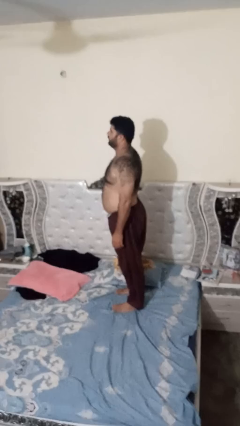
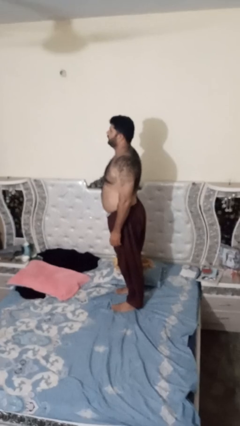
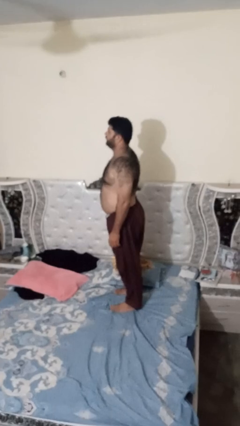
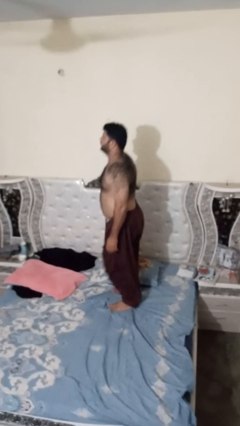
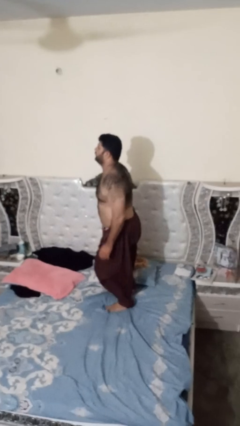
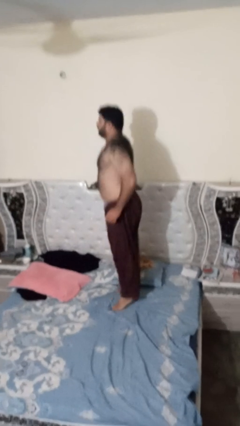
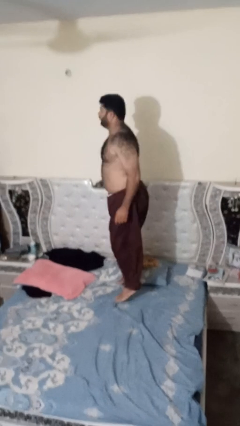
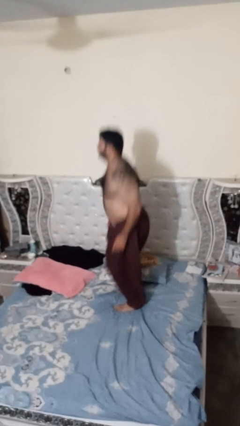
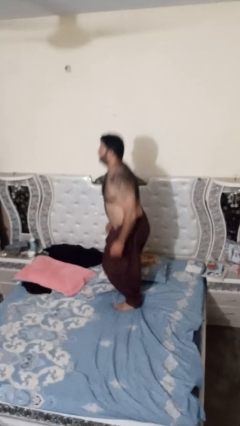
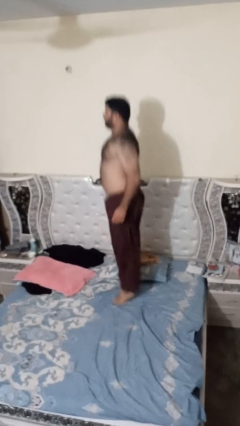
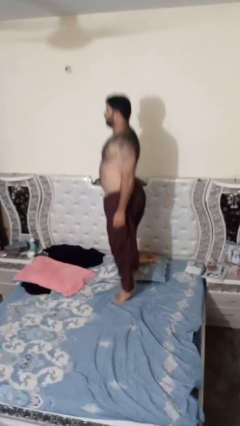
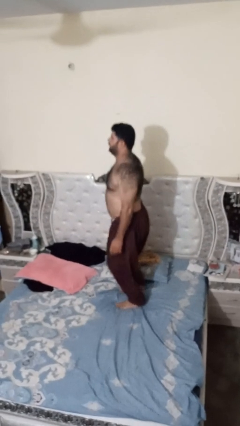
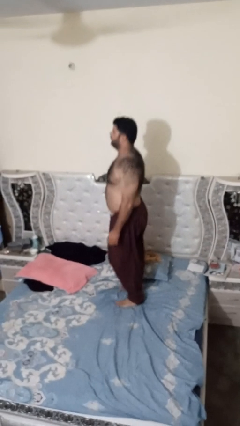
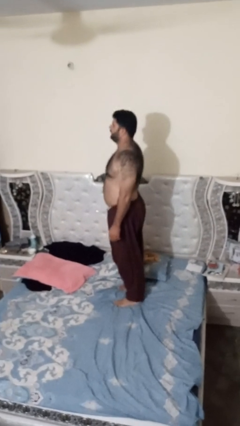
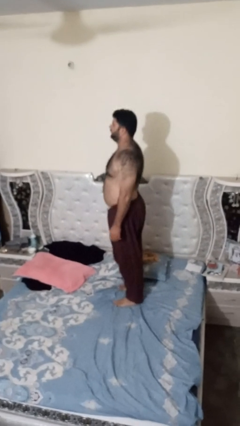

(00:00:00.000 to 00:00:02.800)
person jumps on bed

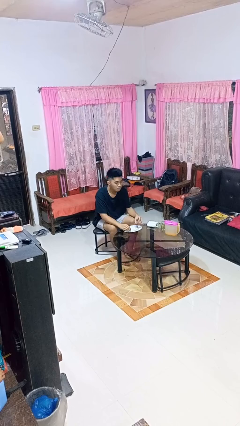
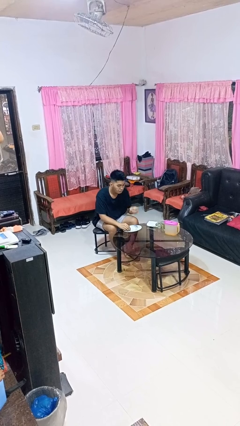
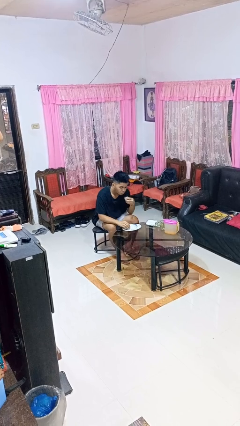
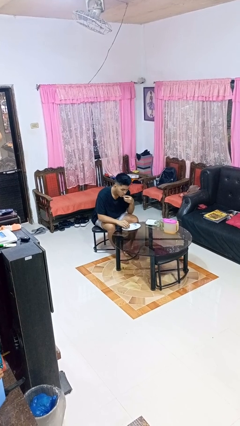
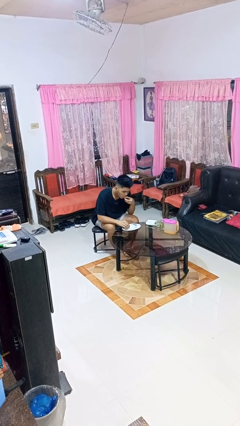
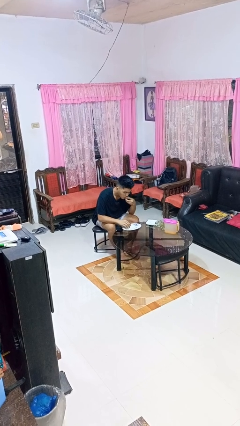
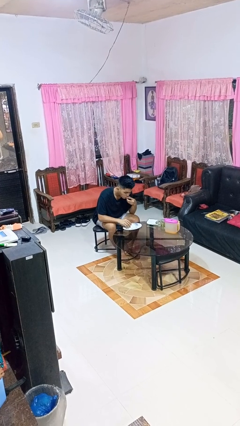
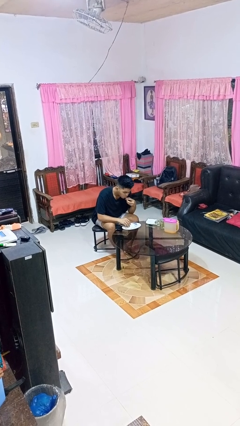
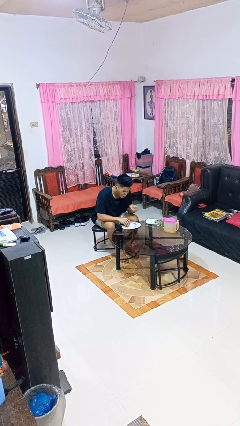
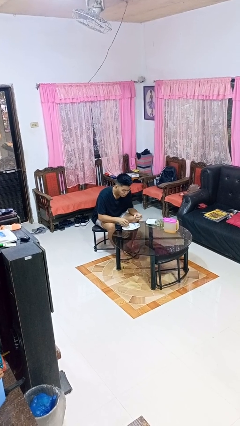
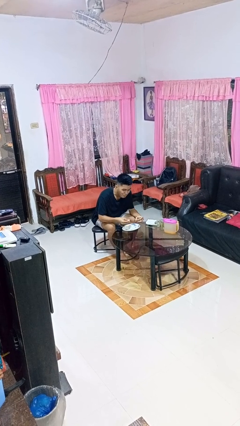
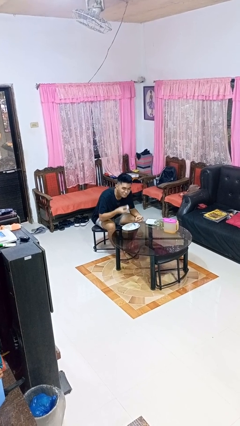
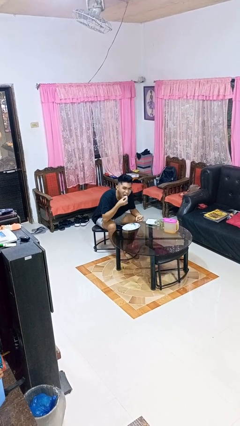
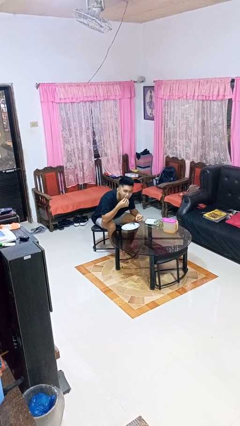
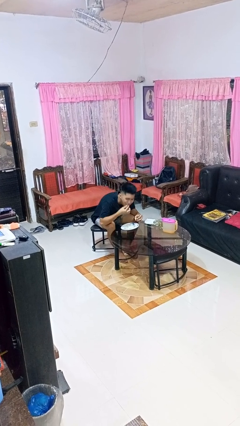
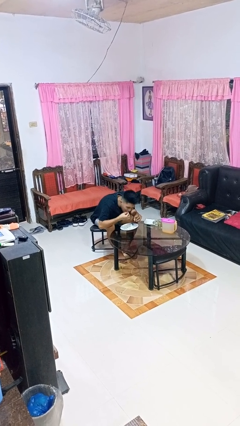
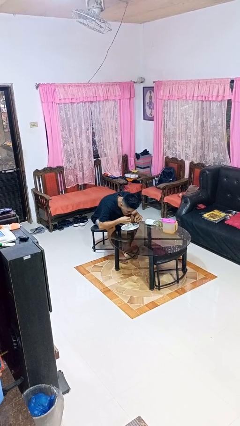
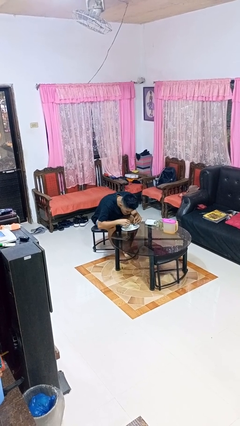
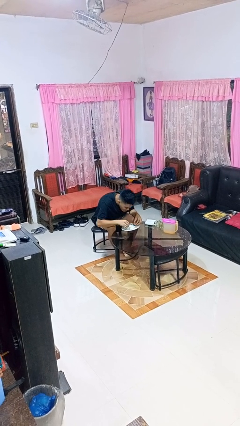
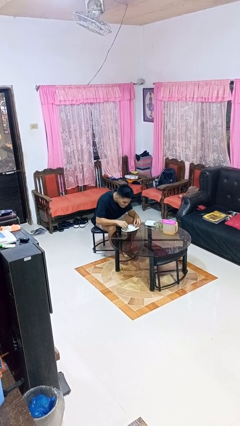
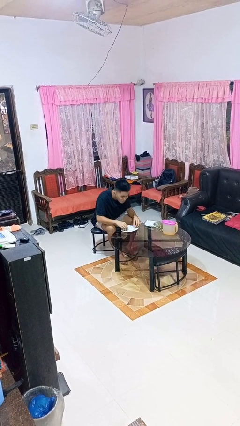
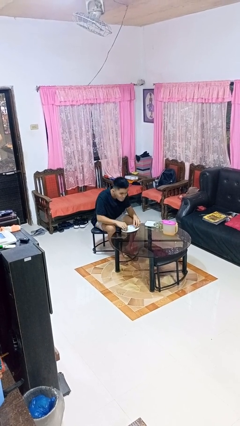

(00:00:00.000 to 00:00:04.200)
person eats with hands

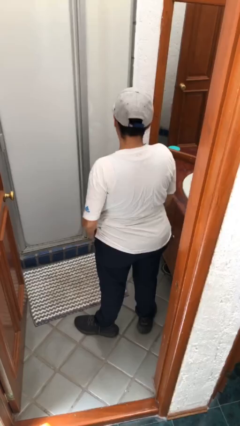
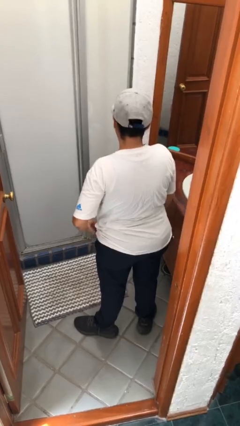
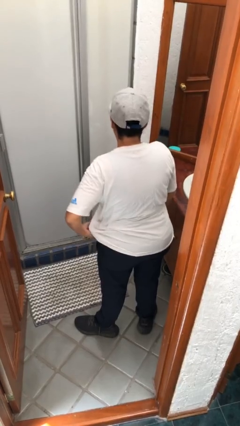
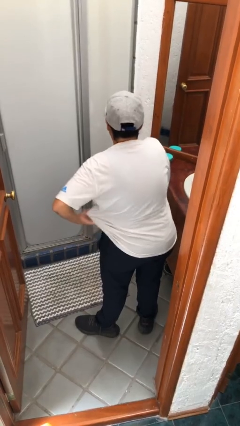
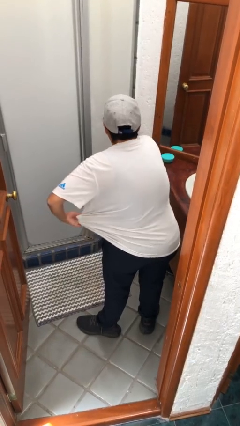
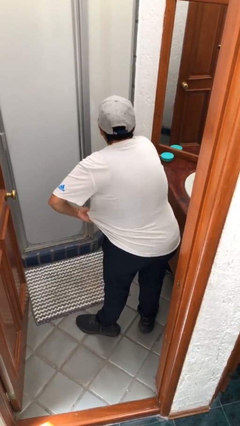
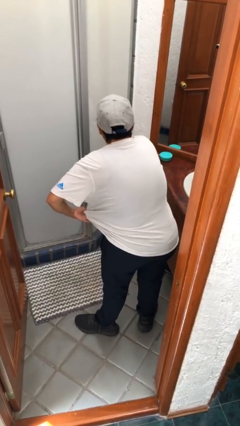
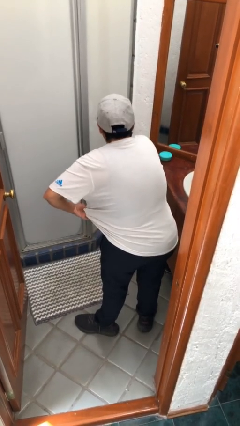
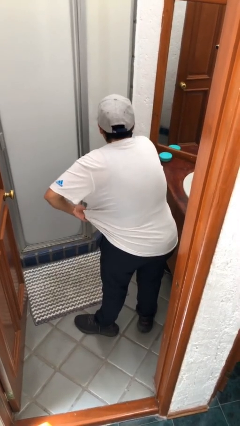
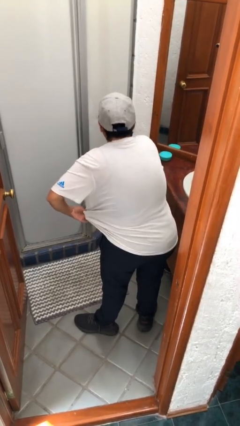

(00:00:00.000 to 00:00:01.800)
person applies deodorant

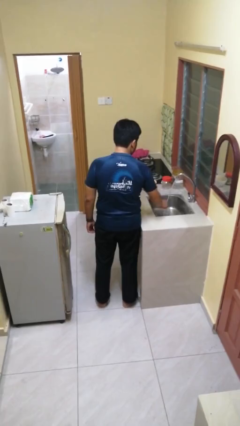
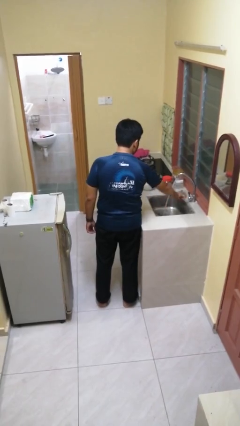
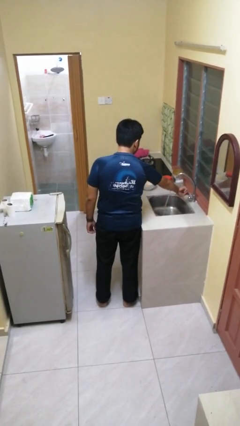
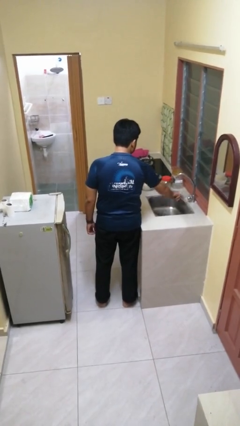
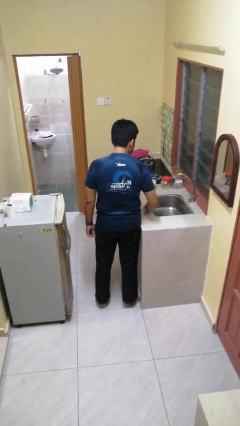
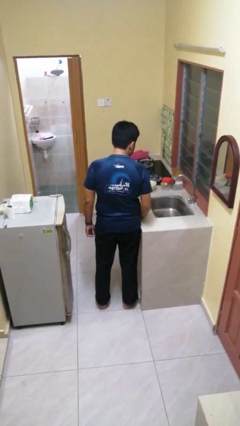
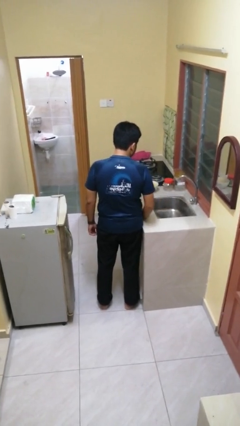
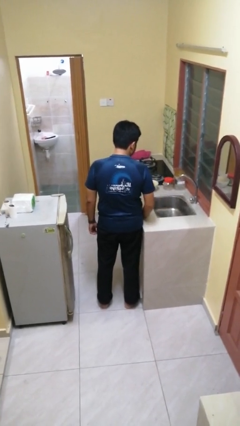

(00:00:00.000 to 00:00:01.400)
person turns off faucet

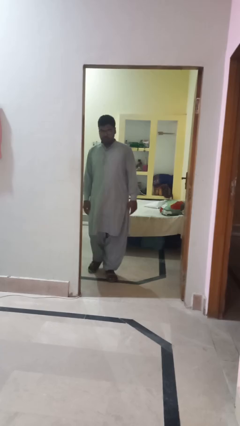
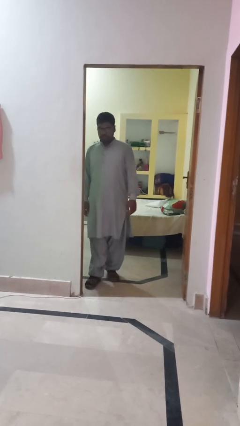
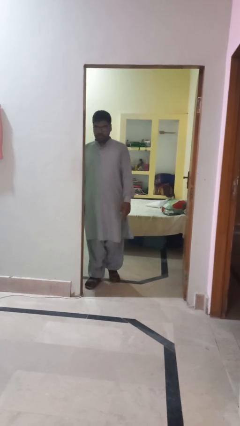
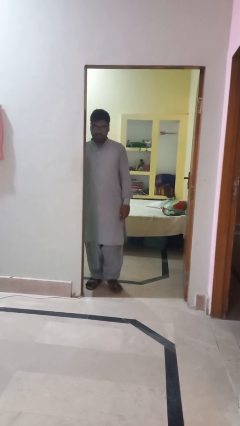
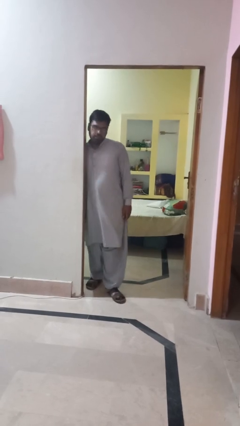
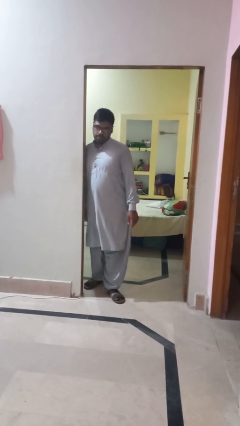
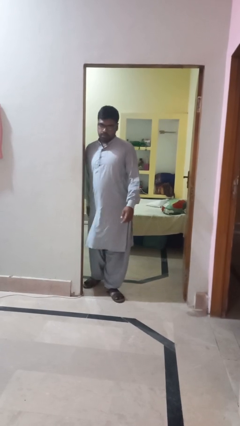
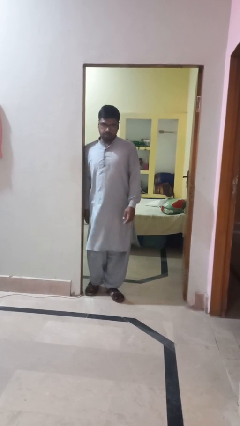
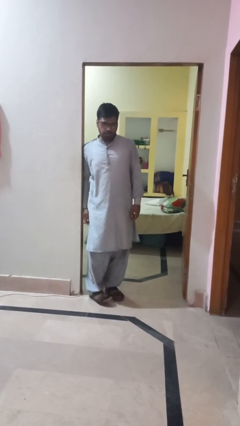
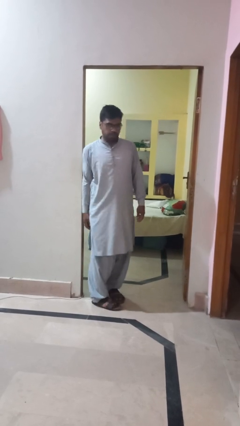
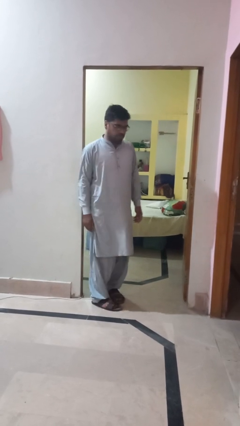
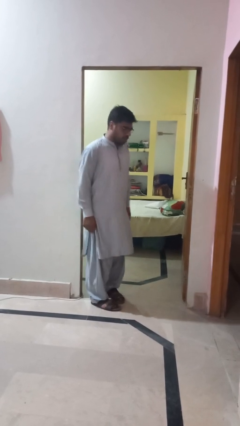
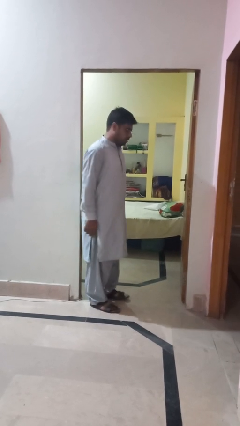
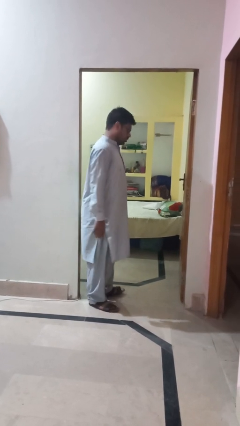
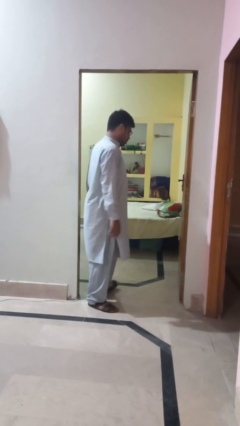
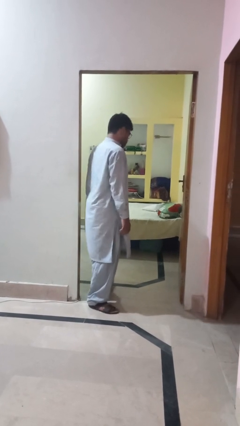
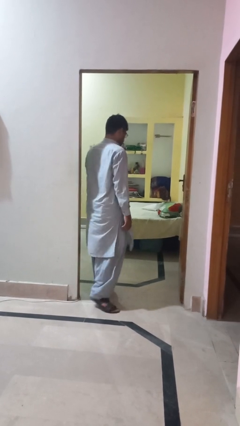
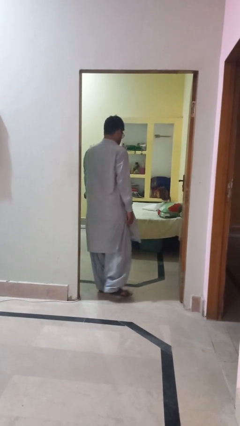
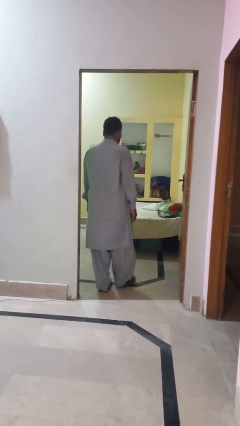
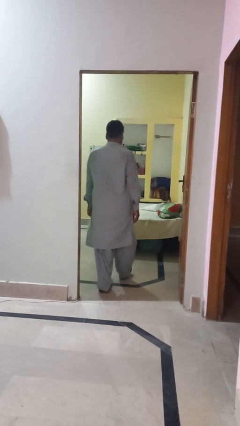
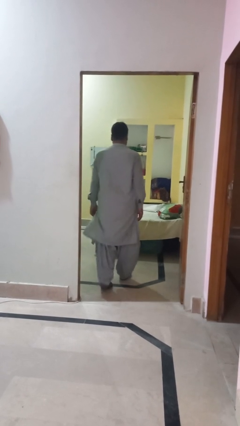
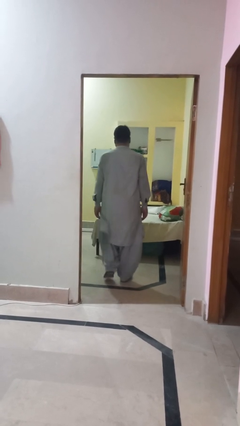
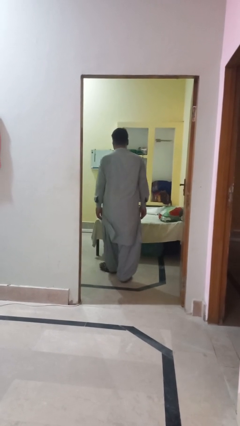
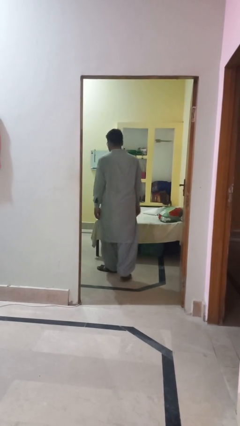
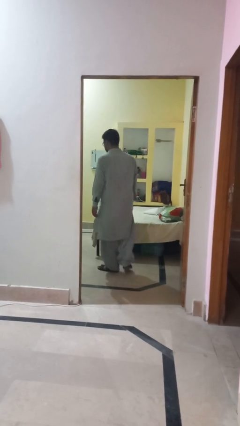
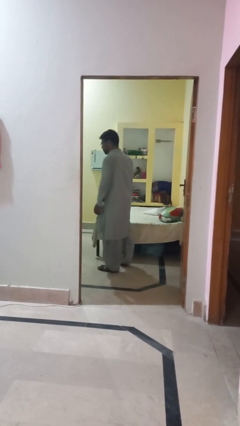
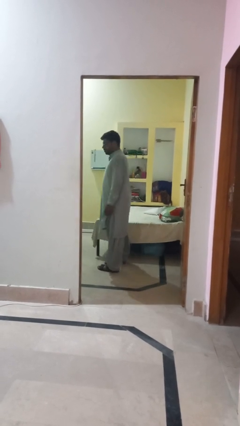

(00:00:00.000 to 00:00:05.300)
person bumps into wall

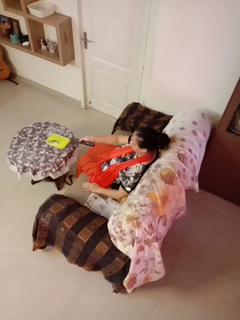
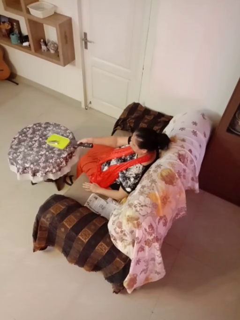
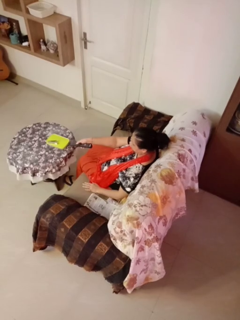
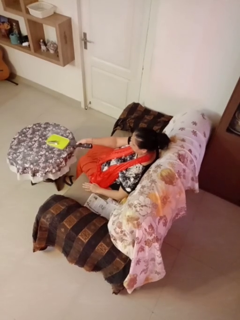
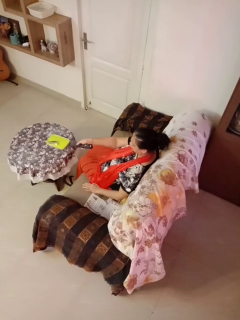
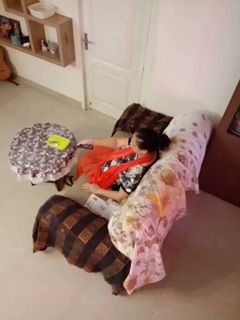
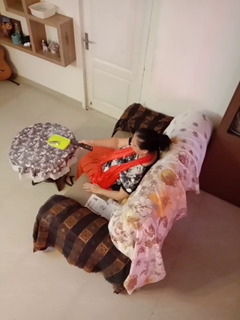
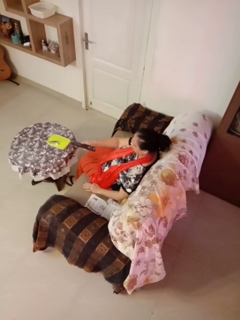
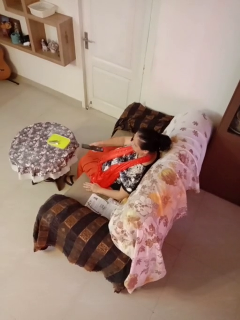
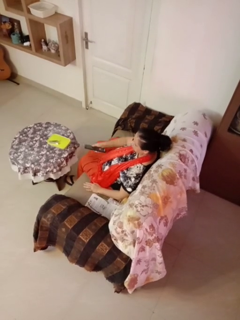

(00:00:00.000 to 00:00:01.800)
person uses television remote

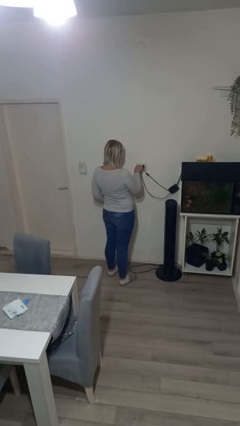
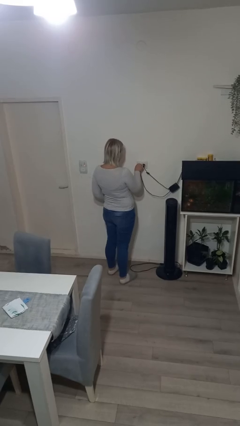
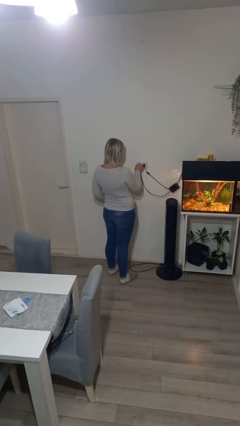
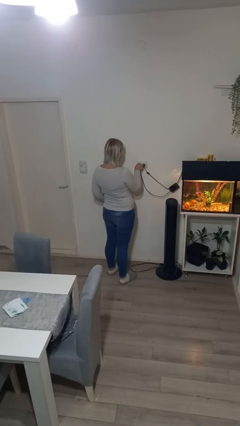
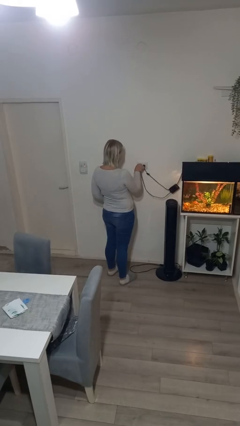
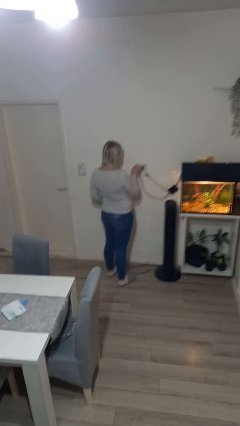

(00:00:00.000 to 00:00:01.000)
person plugs into electrical socket
